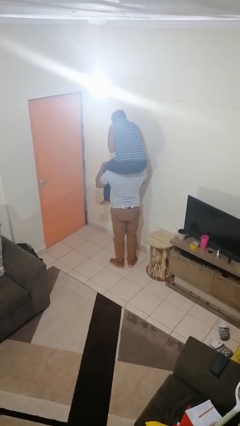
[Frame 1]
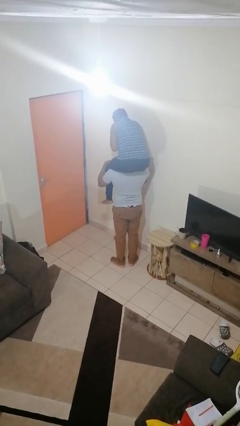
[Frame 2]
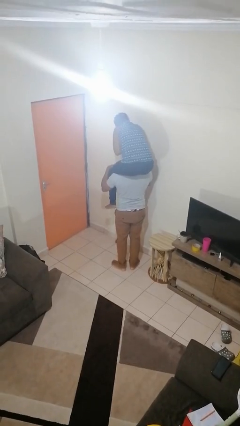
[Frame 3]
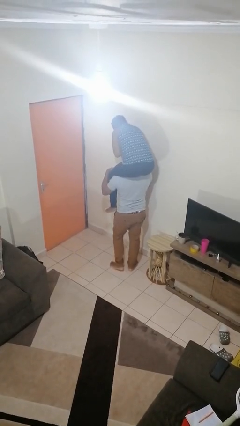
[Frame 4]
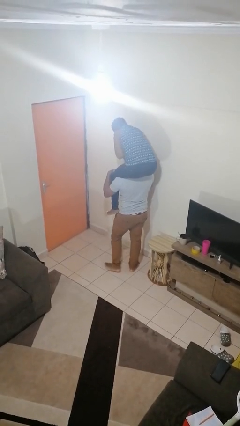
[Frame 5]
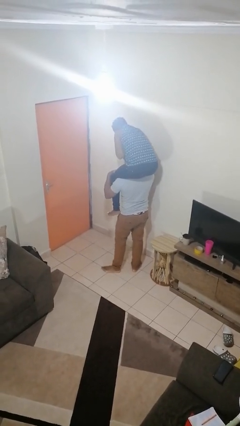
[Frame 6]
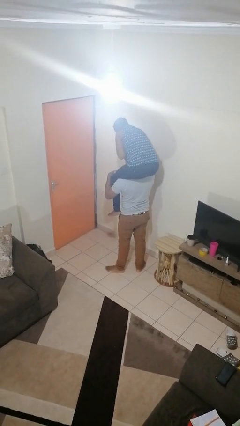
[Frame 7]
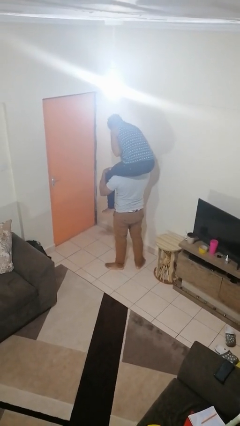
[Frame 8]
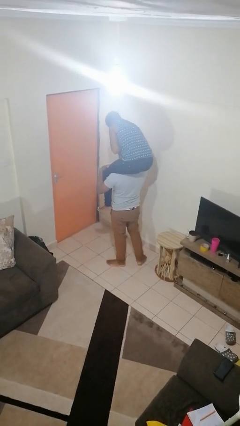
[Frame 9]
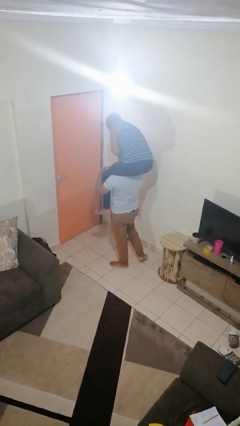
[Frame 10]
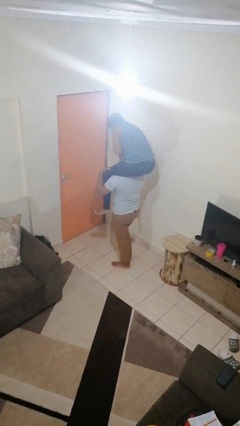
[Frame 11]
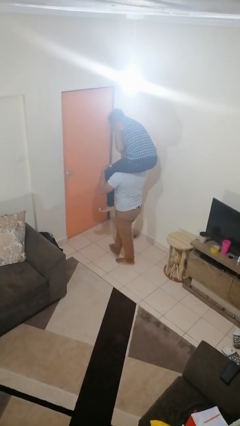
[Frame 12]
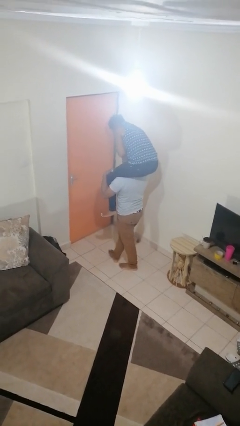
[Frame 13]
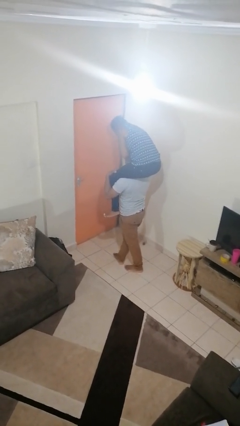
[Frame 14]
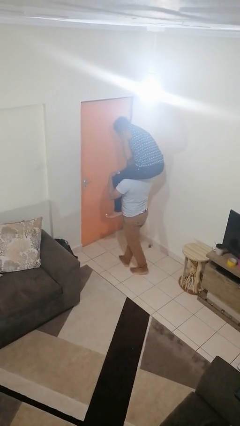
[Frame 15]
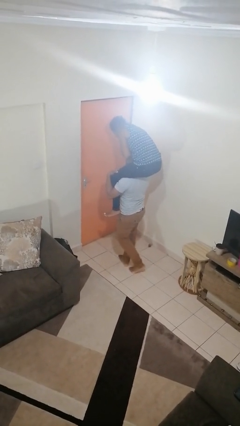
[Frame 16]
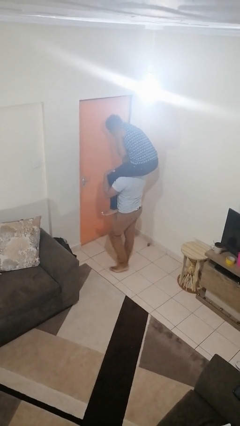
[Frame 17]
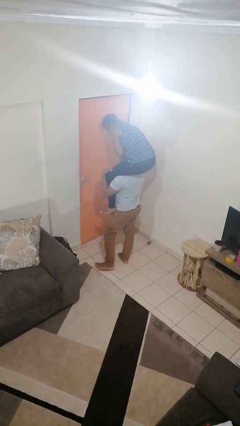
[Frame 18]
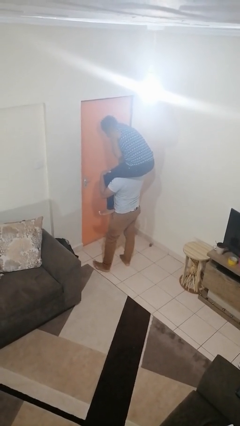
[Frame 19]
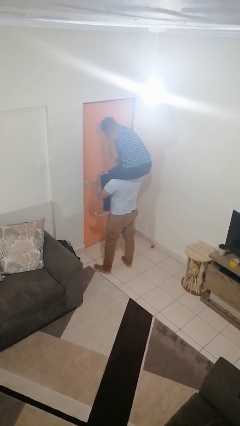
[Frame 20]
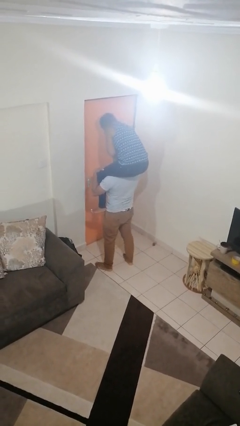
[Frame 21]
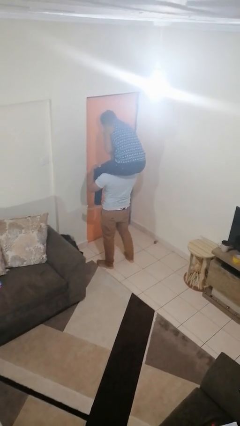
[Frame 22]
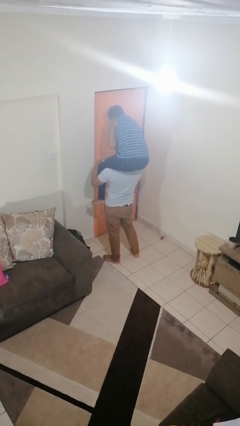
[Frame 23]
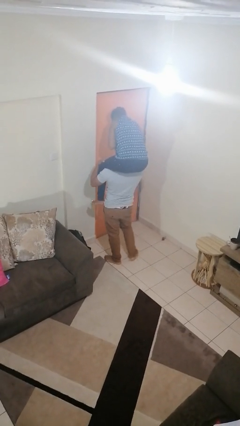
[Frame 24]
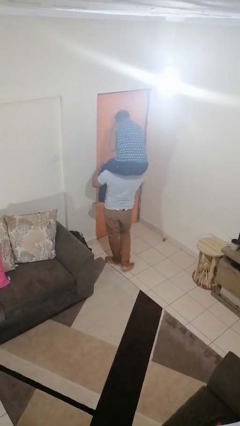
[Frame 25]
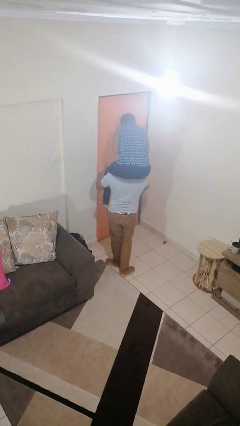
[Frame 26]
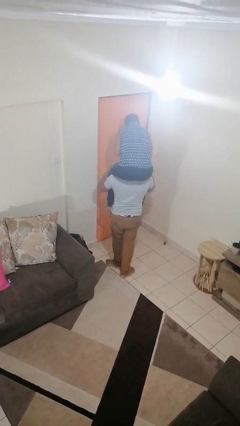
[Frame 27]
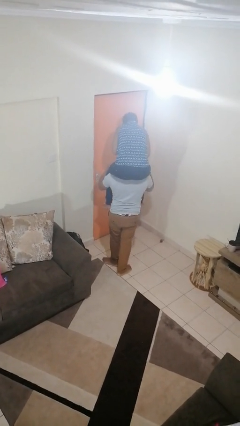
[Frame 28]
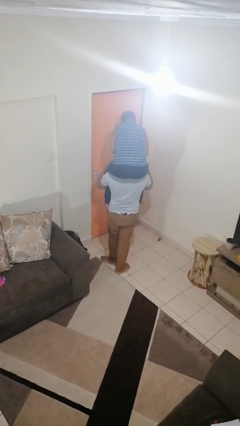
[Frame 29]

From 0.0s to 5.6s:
person carries person on shoulders

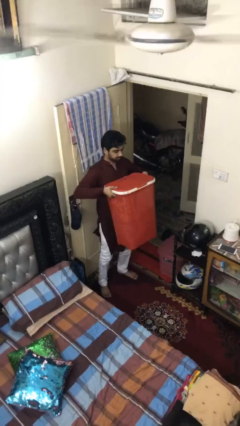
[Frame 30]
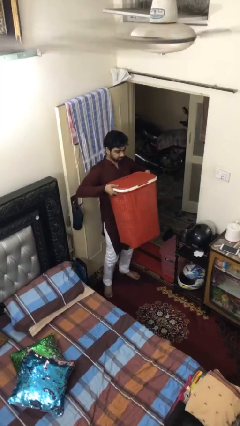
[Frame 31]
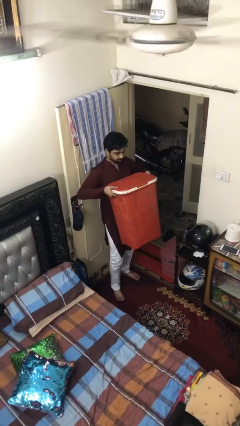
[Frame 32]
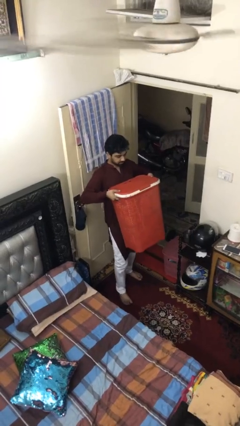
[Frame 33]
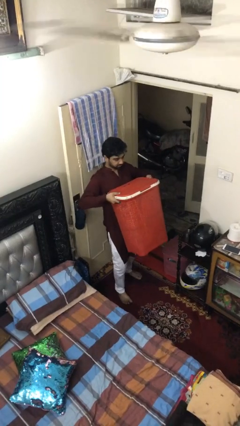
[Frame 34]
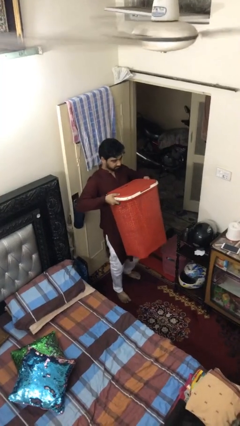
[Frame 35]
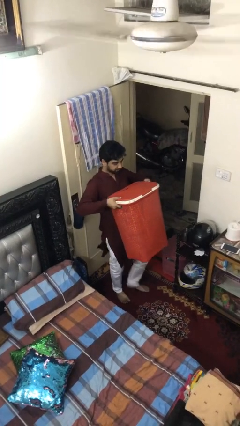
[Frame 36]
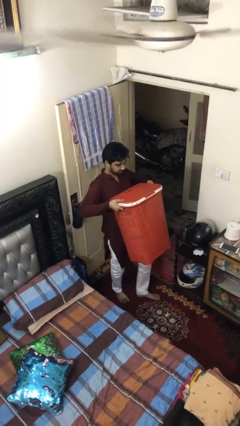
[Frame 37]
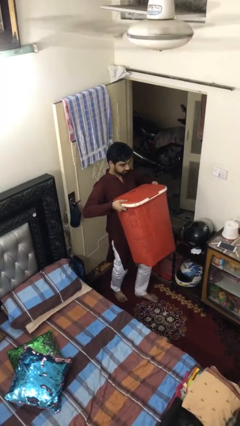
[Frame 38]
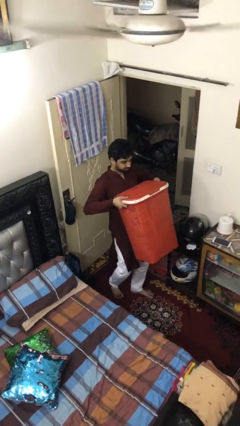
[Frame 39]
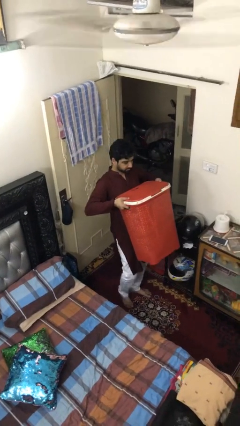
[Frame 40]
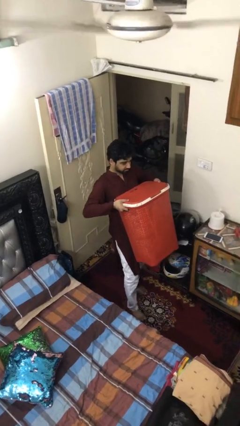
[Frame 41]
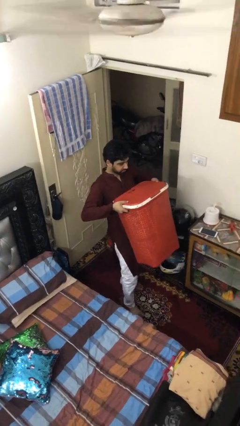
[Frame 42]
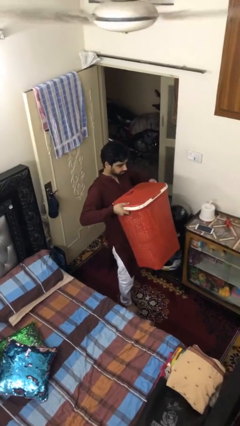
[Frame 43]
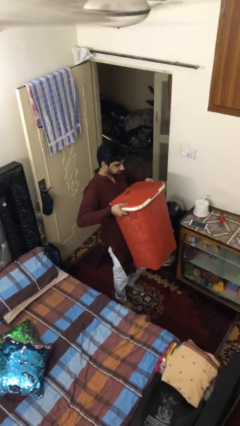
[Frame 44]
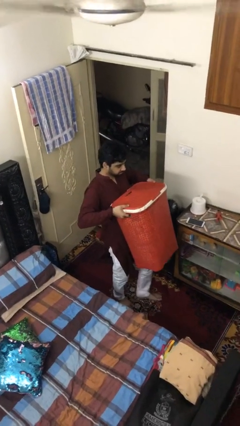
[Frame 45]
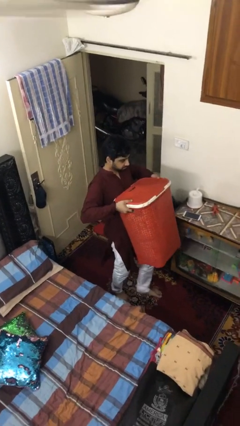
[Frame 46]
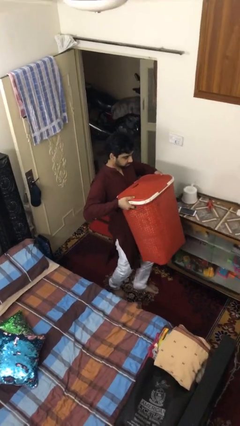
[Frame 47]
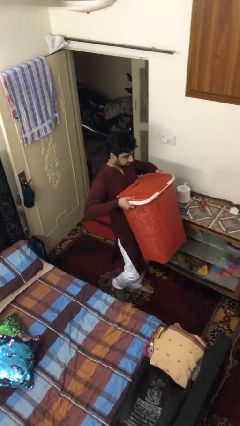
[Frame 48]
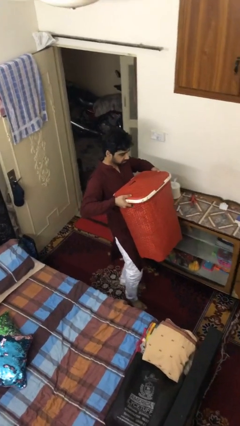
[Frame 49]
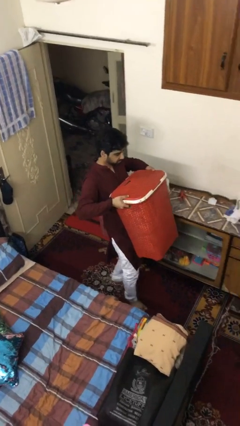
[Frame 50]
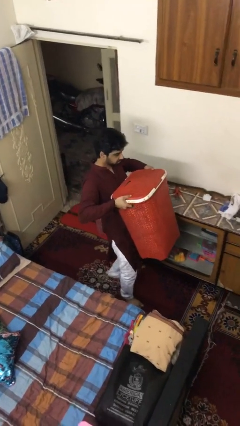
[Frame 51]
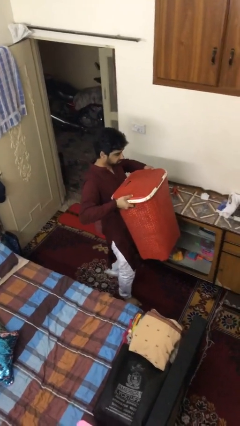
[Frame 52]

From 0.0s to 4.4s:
person carries heavy object

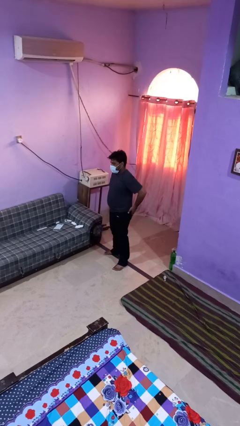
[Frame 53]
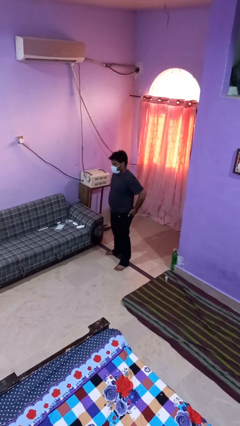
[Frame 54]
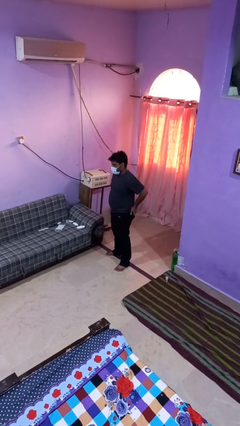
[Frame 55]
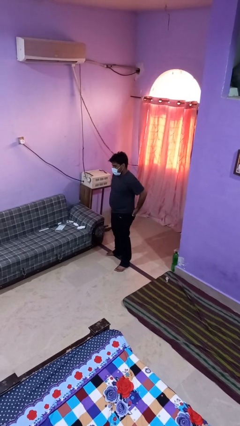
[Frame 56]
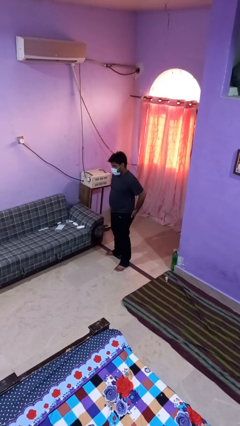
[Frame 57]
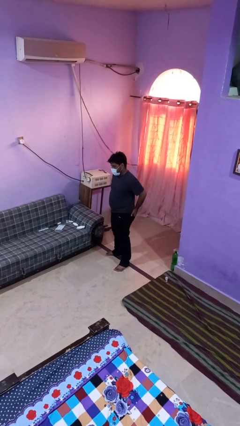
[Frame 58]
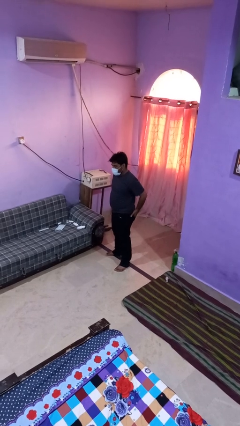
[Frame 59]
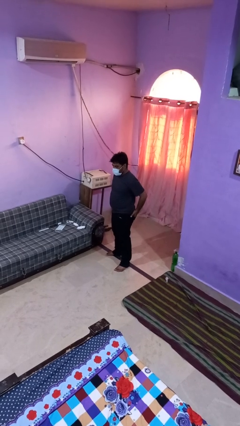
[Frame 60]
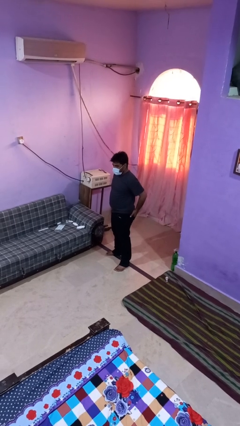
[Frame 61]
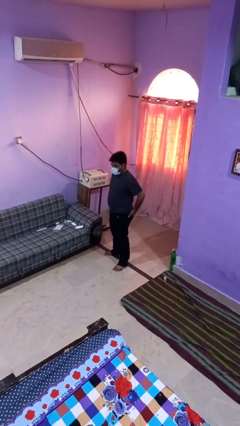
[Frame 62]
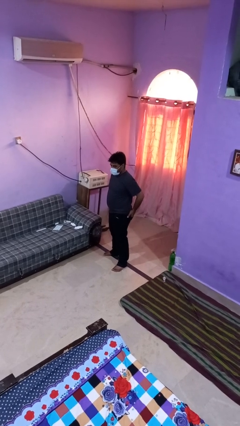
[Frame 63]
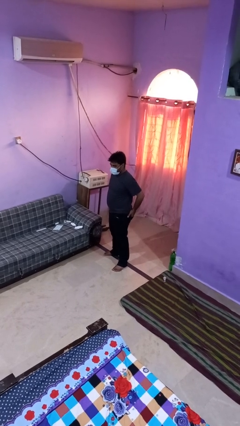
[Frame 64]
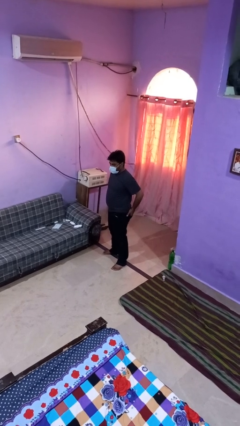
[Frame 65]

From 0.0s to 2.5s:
person puts hands in back pockets

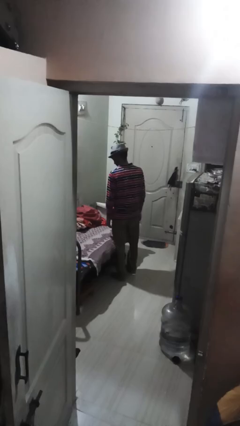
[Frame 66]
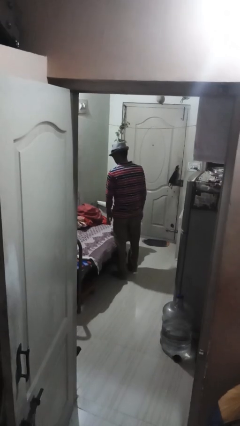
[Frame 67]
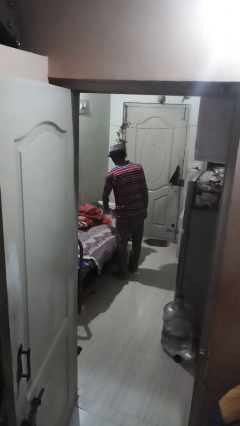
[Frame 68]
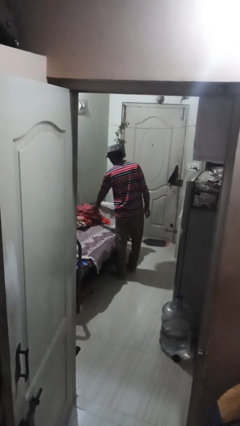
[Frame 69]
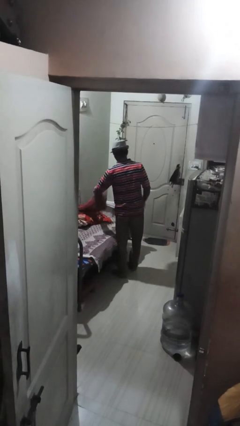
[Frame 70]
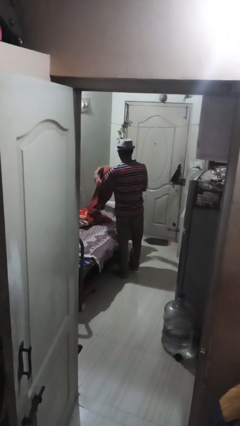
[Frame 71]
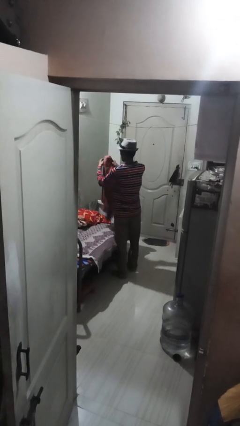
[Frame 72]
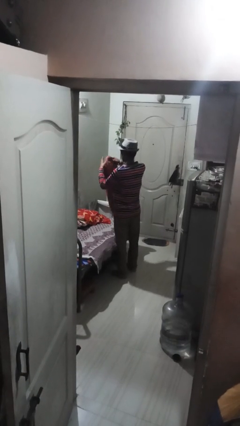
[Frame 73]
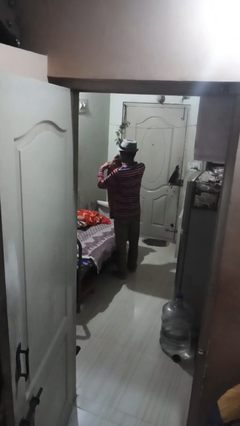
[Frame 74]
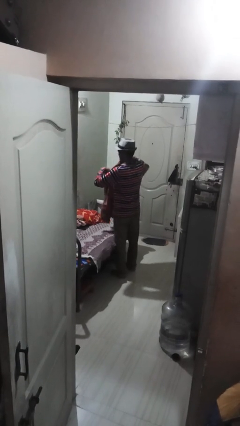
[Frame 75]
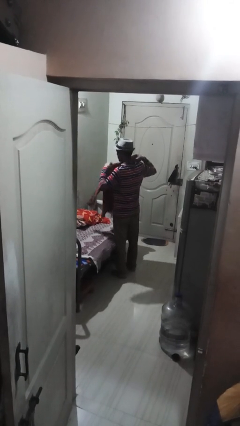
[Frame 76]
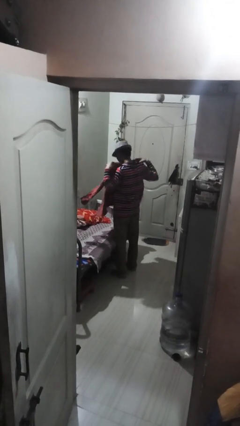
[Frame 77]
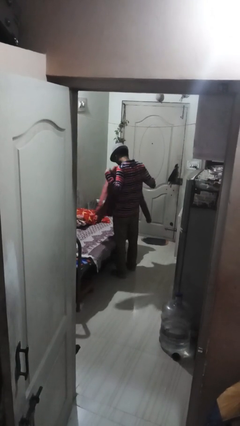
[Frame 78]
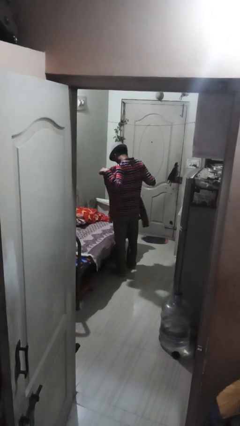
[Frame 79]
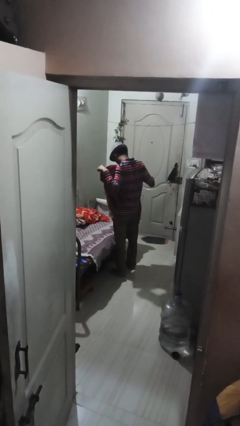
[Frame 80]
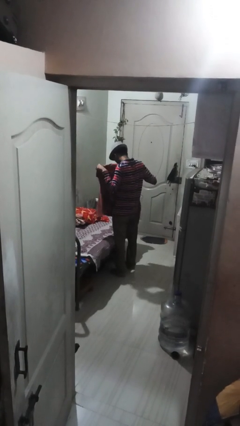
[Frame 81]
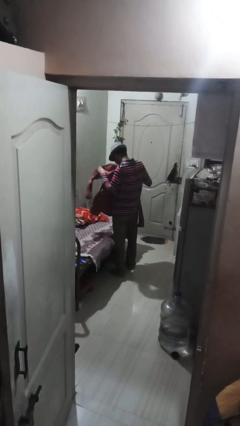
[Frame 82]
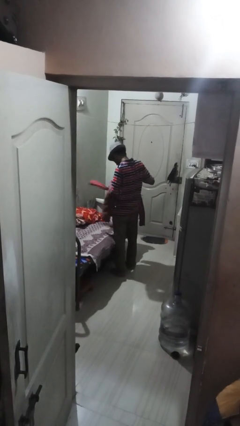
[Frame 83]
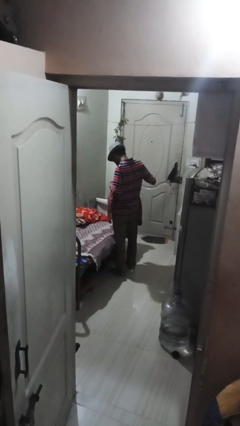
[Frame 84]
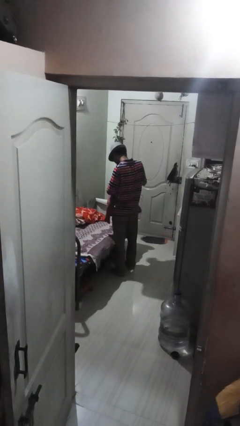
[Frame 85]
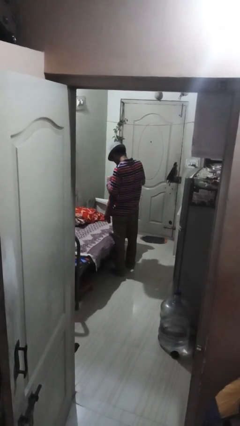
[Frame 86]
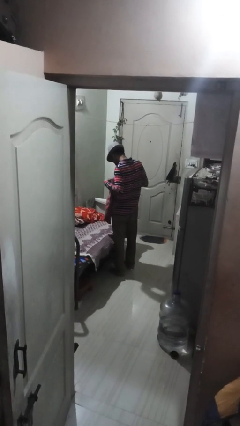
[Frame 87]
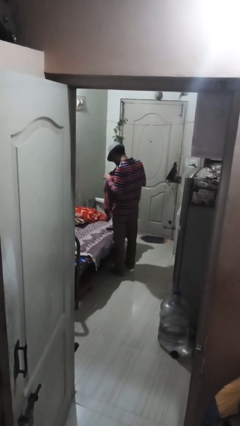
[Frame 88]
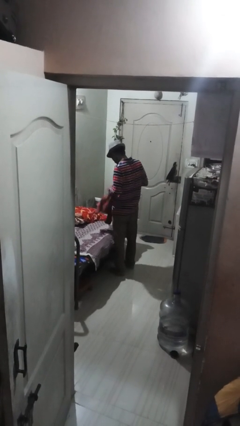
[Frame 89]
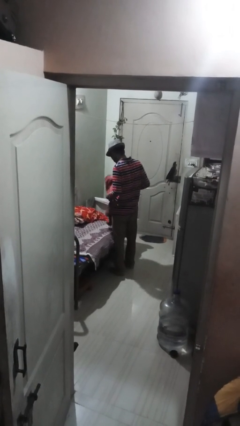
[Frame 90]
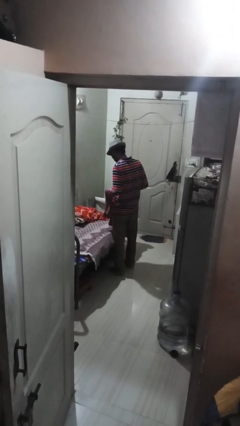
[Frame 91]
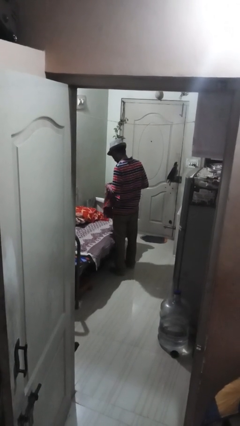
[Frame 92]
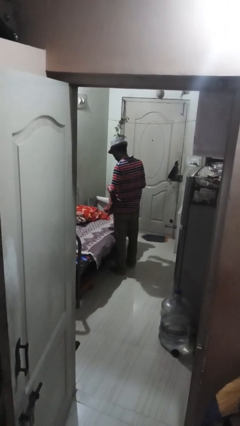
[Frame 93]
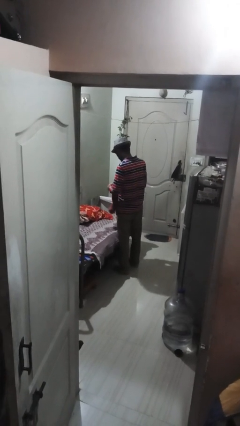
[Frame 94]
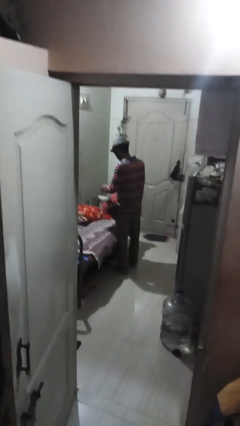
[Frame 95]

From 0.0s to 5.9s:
person folds shirt
